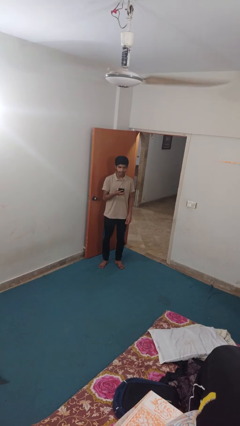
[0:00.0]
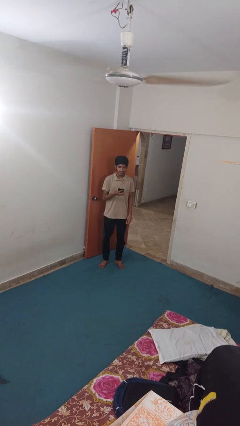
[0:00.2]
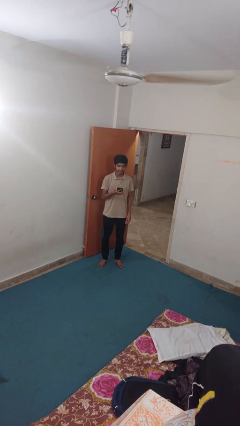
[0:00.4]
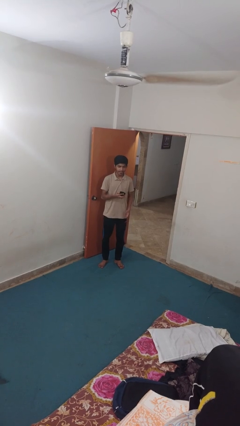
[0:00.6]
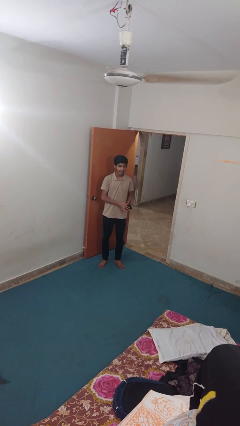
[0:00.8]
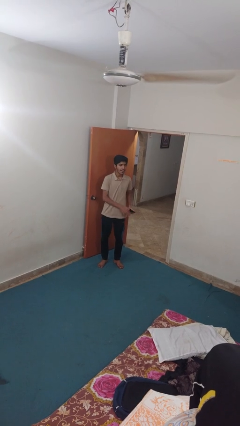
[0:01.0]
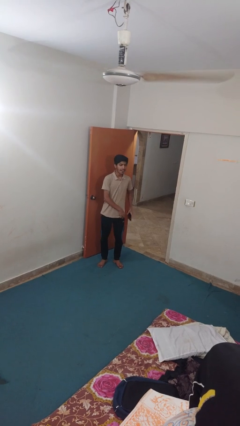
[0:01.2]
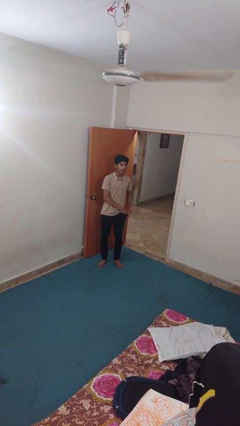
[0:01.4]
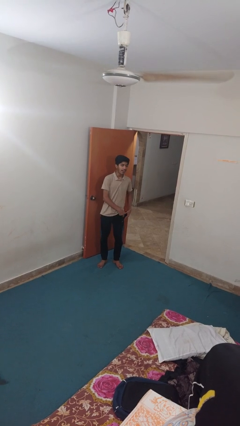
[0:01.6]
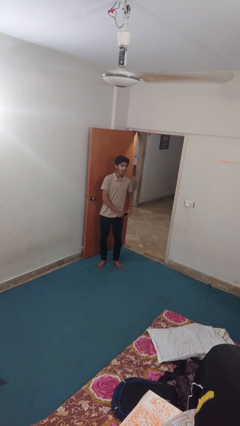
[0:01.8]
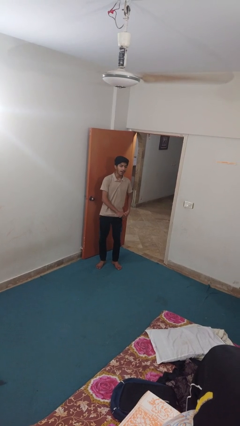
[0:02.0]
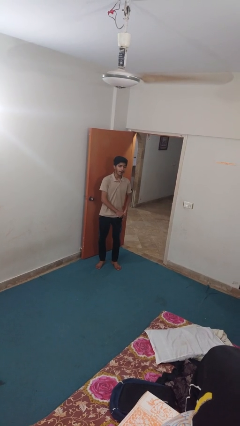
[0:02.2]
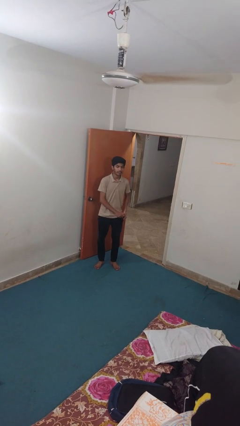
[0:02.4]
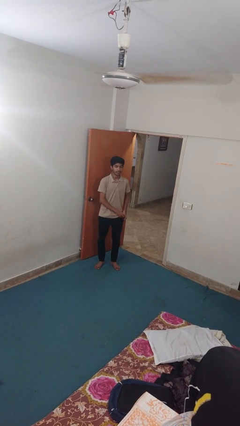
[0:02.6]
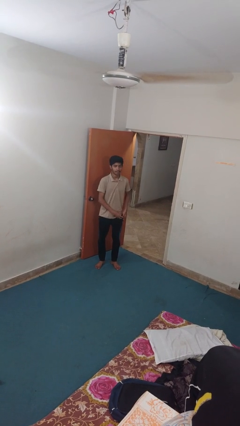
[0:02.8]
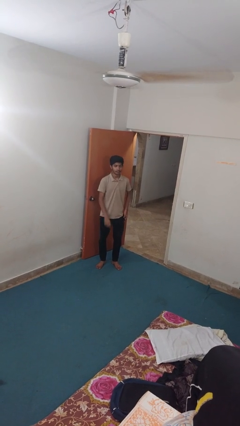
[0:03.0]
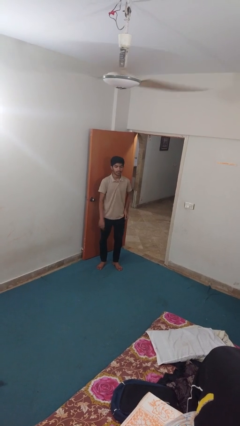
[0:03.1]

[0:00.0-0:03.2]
person puts phone into pocket

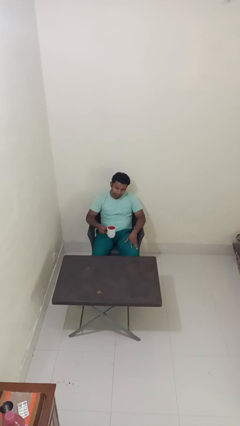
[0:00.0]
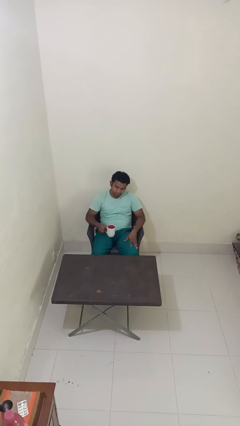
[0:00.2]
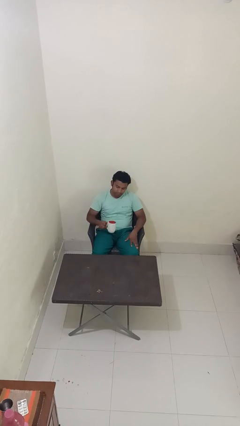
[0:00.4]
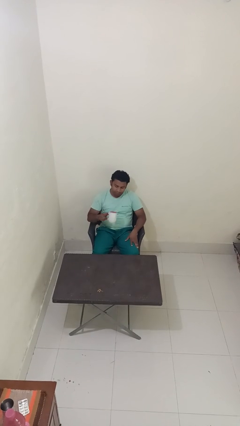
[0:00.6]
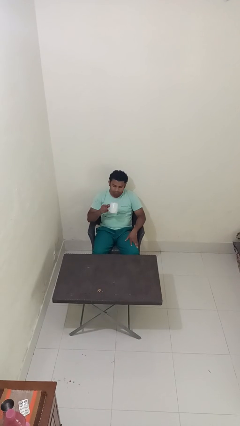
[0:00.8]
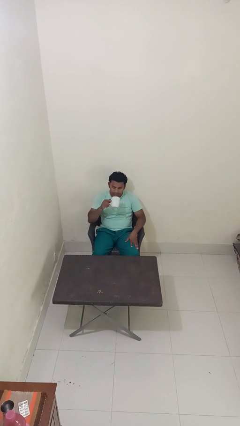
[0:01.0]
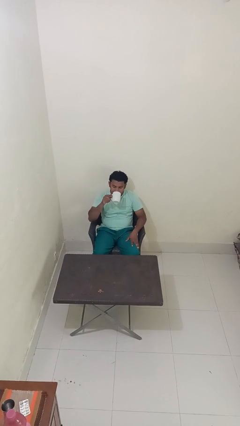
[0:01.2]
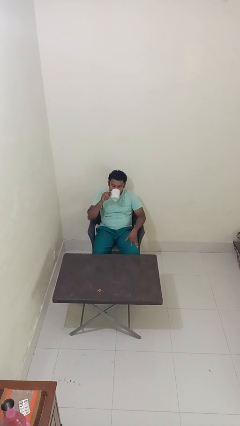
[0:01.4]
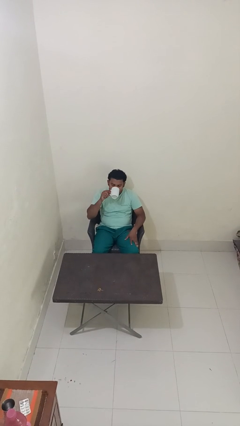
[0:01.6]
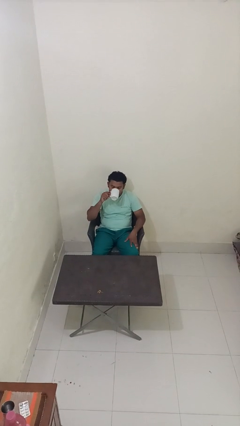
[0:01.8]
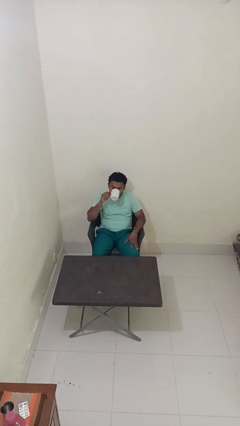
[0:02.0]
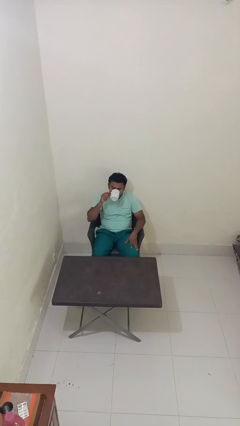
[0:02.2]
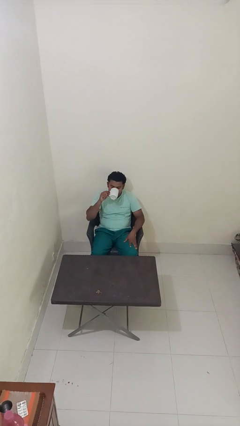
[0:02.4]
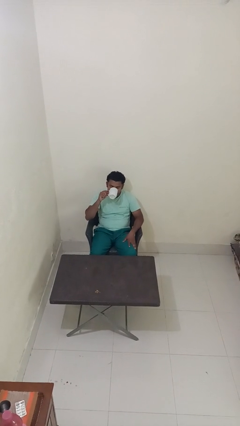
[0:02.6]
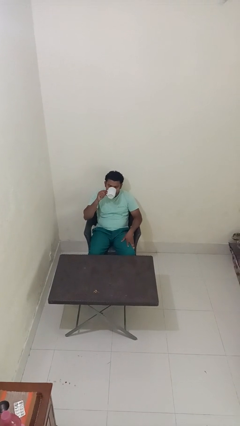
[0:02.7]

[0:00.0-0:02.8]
person drinks from mug

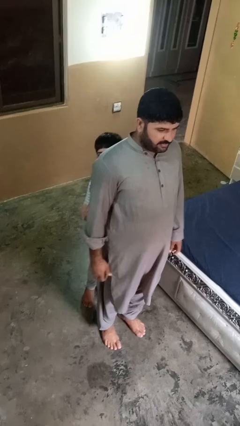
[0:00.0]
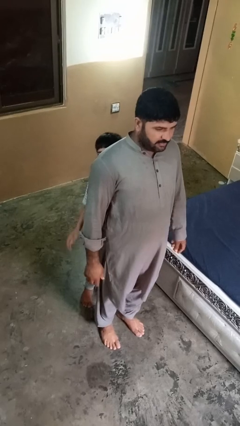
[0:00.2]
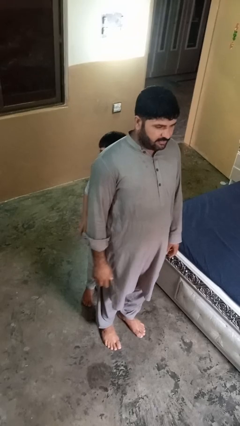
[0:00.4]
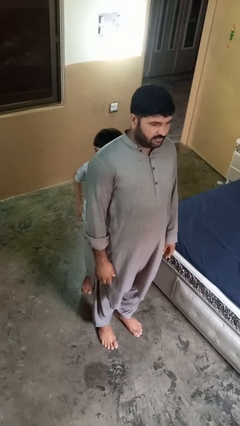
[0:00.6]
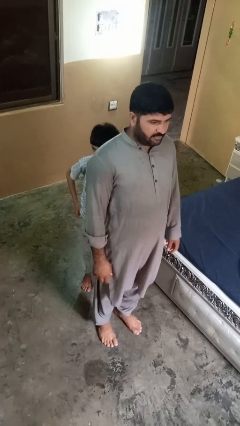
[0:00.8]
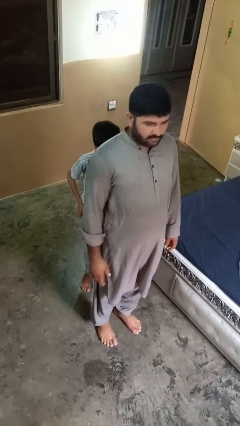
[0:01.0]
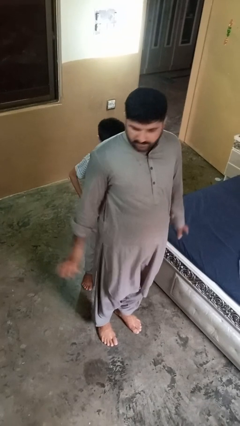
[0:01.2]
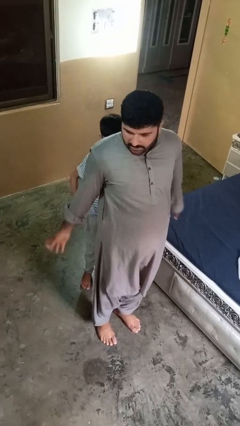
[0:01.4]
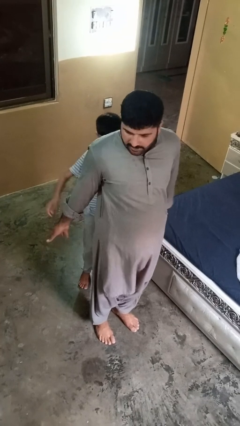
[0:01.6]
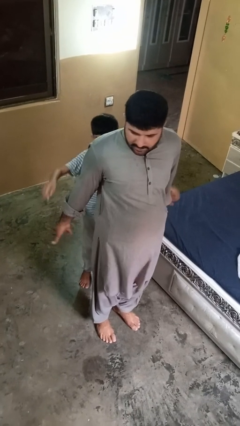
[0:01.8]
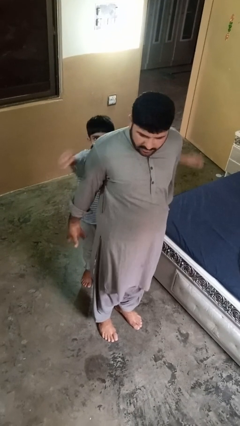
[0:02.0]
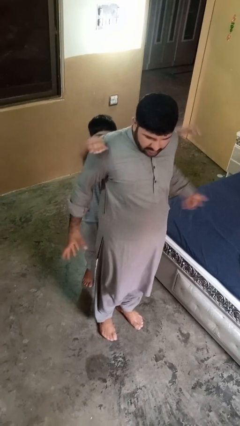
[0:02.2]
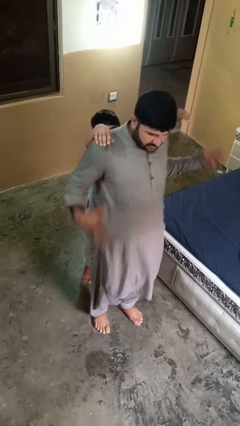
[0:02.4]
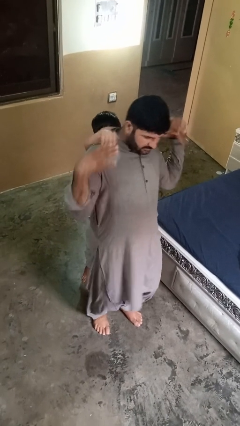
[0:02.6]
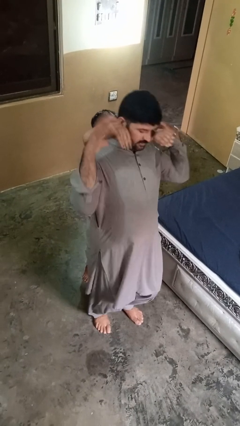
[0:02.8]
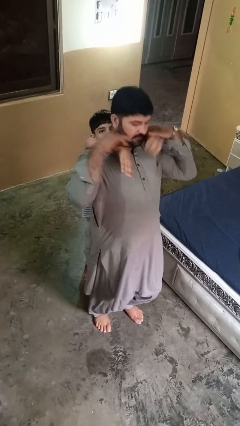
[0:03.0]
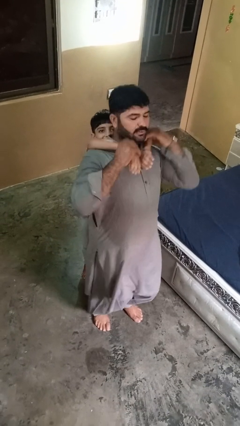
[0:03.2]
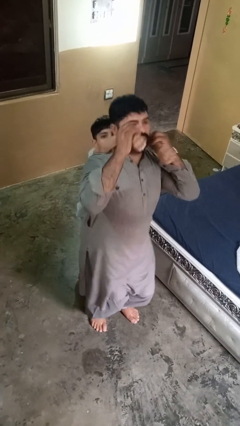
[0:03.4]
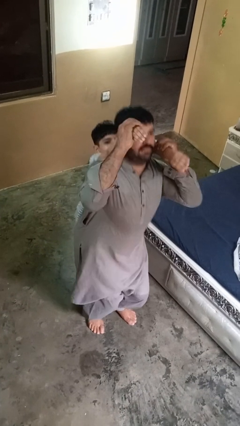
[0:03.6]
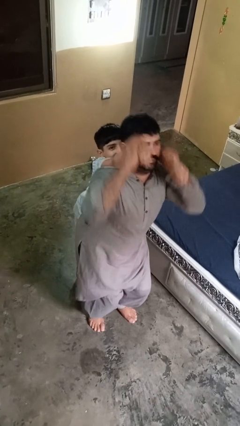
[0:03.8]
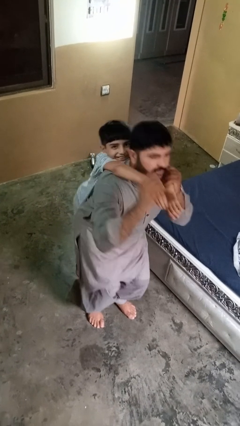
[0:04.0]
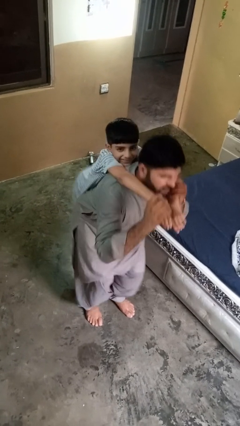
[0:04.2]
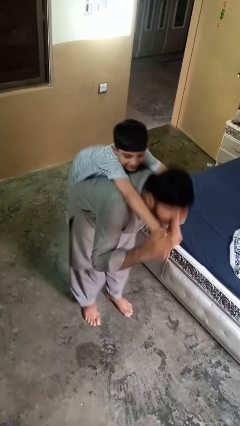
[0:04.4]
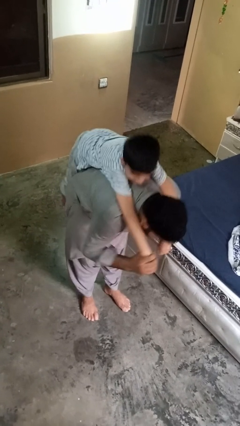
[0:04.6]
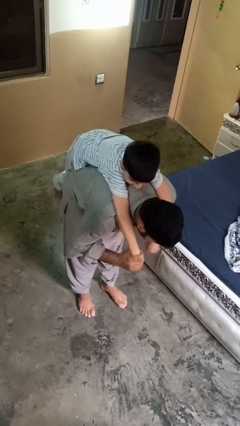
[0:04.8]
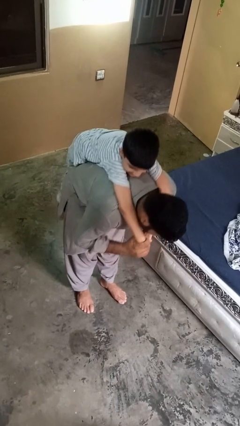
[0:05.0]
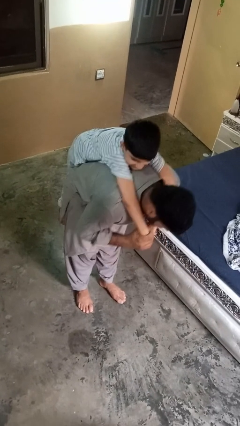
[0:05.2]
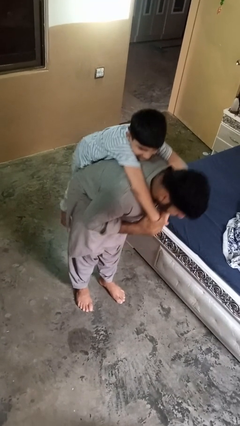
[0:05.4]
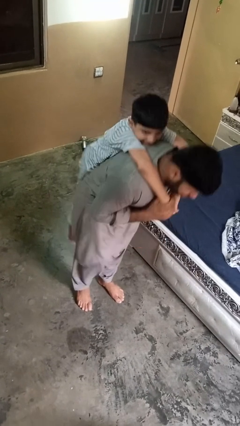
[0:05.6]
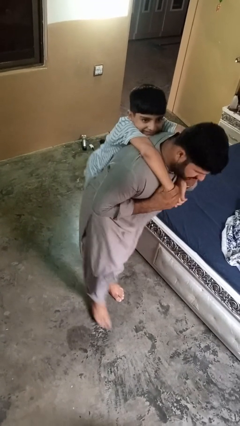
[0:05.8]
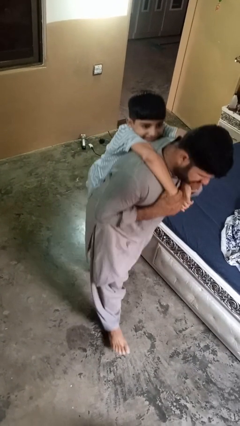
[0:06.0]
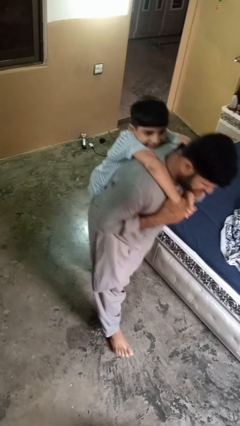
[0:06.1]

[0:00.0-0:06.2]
person carries person on back

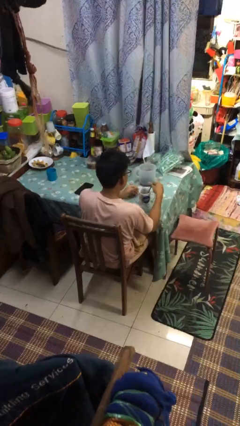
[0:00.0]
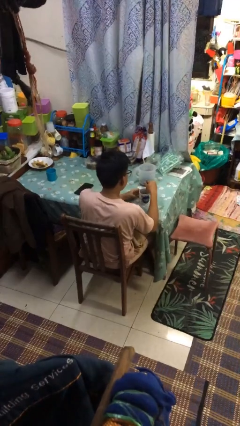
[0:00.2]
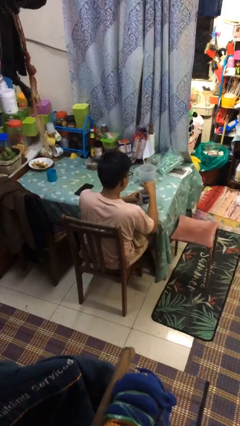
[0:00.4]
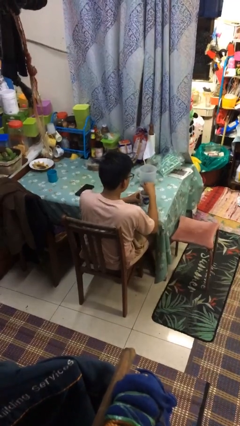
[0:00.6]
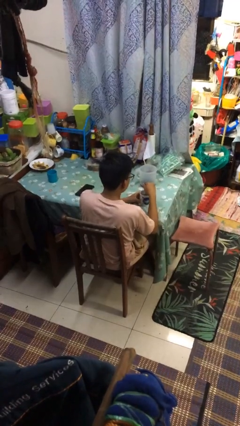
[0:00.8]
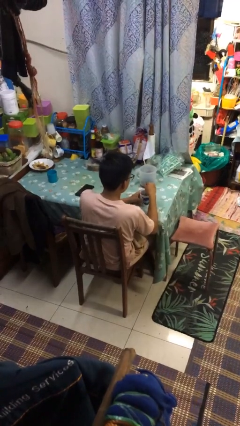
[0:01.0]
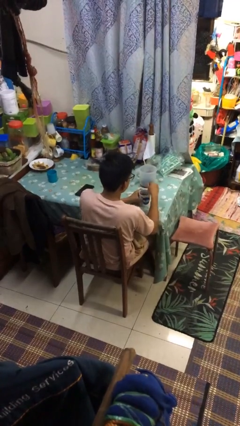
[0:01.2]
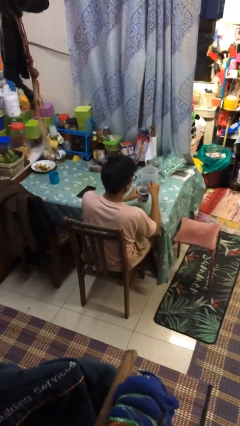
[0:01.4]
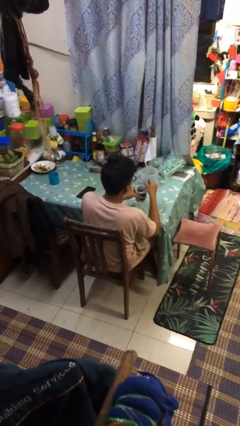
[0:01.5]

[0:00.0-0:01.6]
person stirs mug

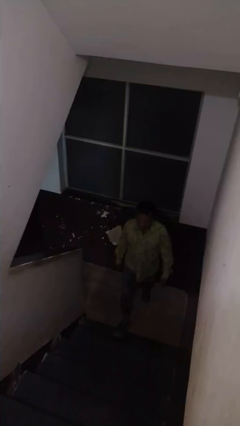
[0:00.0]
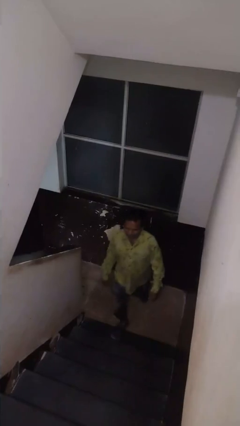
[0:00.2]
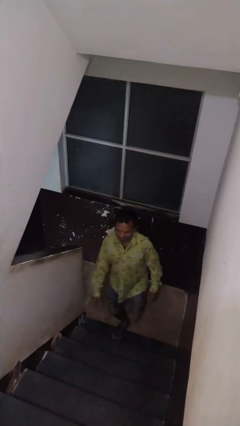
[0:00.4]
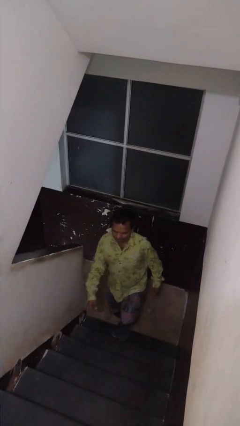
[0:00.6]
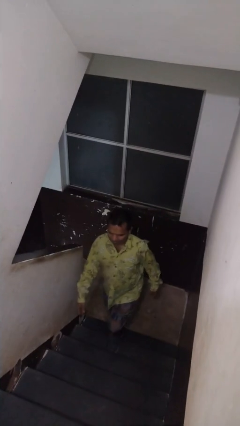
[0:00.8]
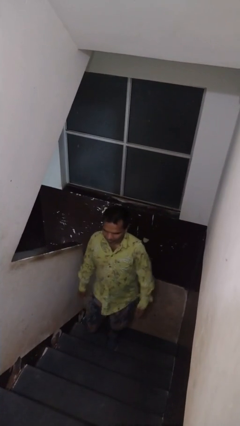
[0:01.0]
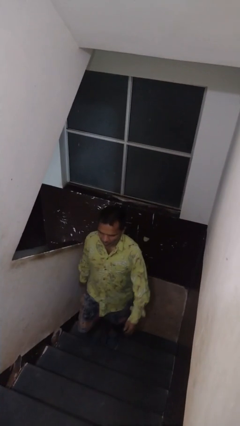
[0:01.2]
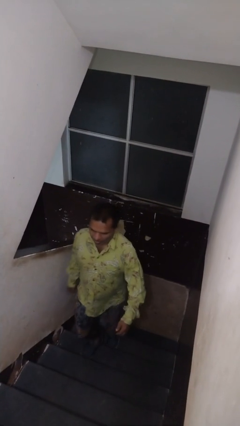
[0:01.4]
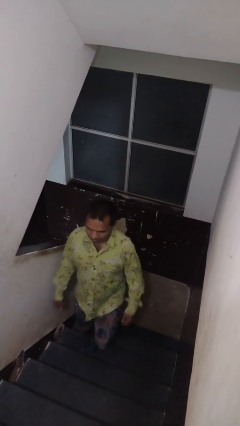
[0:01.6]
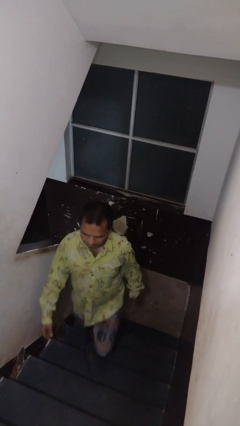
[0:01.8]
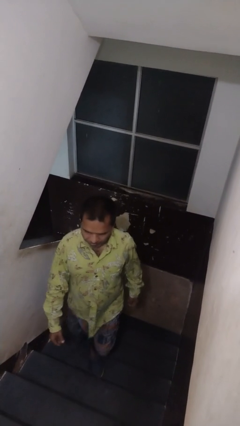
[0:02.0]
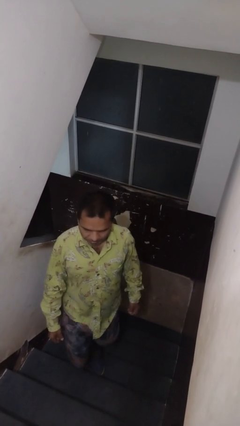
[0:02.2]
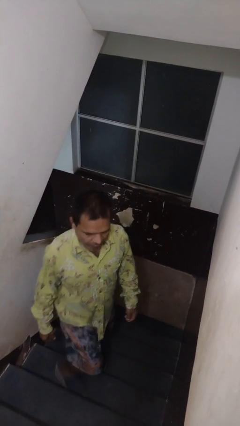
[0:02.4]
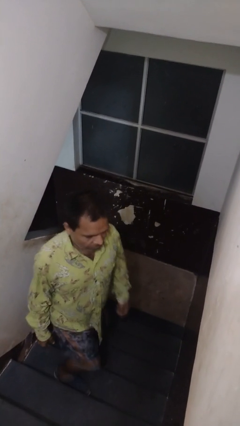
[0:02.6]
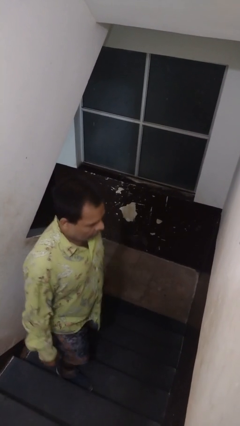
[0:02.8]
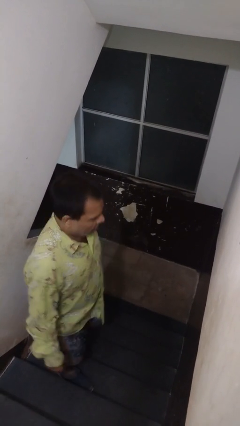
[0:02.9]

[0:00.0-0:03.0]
person climbs up stairs

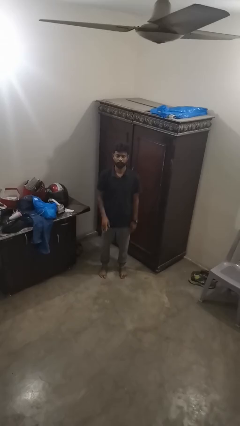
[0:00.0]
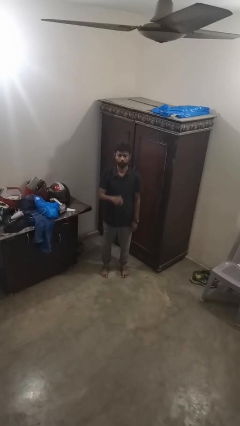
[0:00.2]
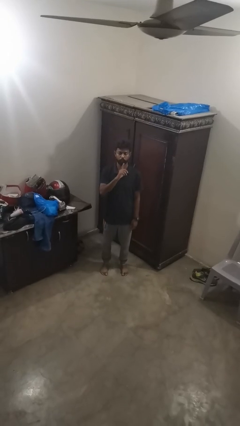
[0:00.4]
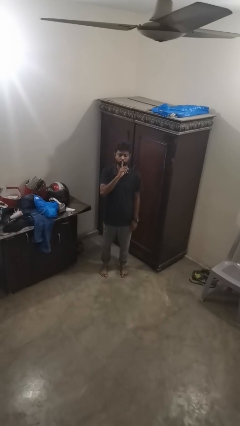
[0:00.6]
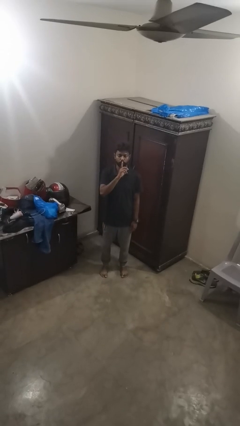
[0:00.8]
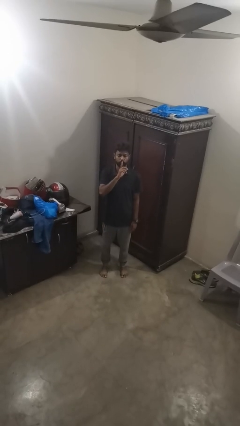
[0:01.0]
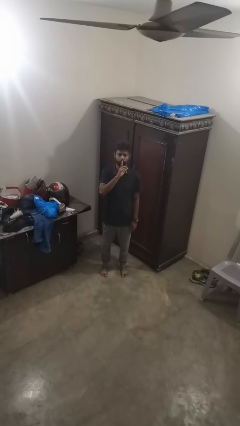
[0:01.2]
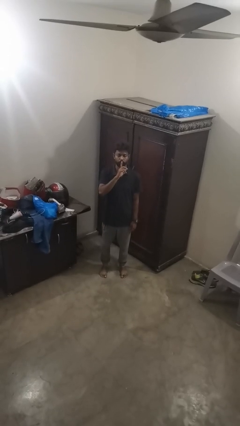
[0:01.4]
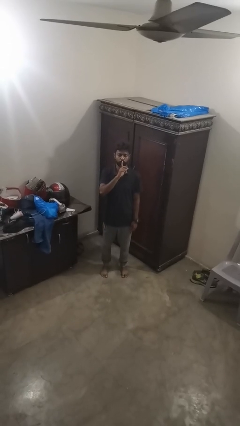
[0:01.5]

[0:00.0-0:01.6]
person gestures be quiet
